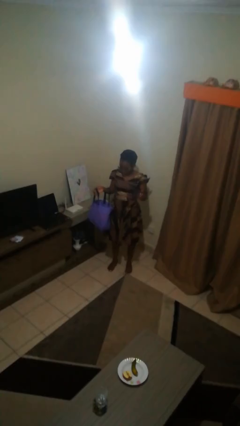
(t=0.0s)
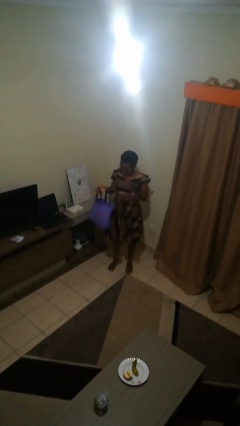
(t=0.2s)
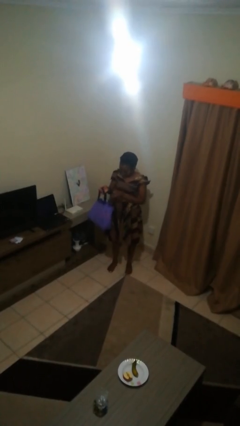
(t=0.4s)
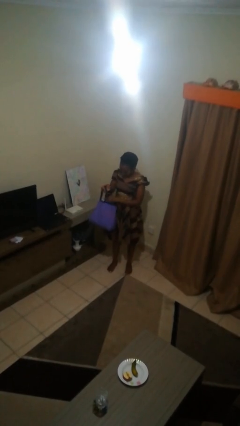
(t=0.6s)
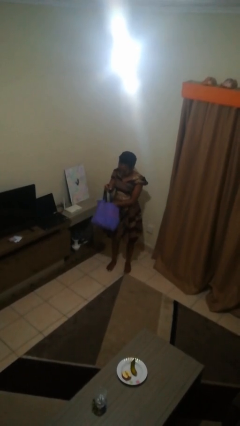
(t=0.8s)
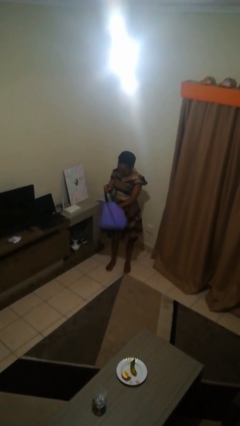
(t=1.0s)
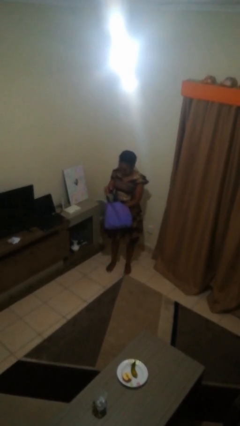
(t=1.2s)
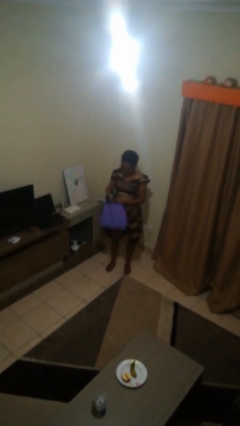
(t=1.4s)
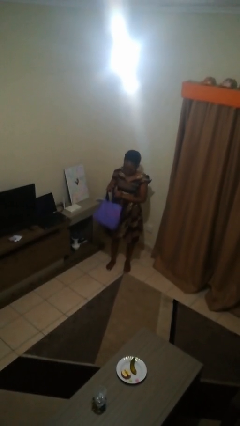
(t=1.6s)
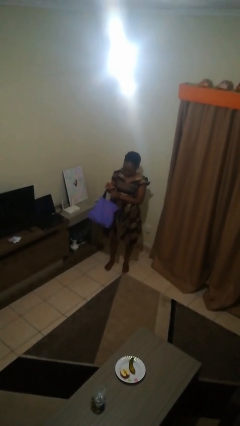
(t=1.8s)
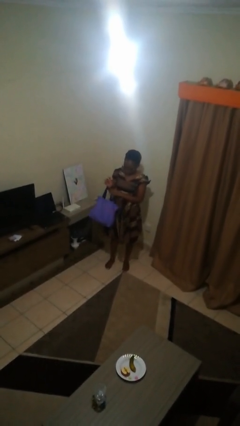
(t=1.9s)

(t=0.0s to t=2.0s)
person puts object into bag

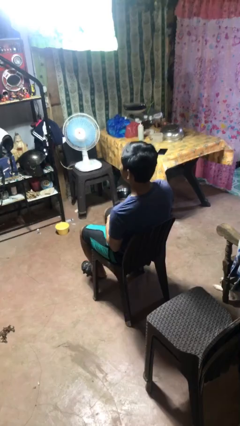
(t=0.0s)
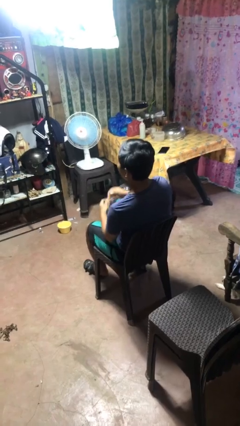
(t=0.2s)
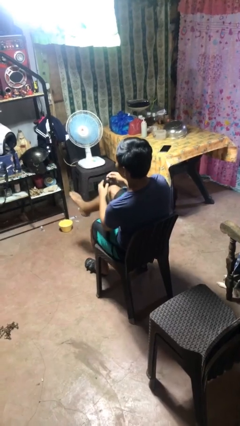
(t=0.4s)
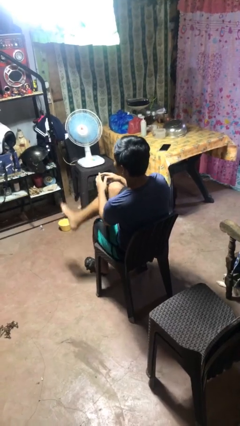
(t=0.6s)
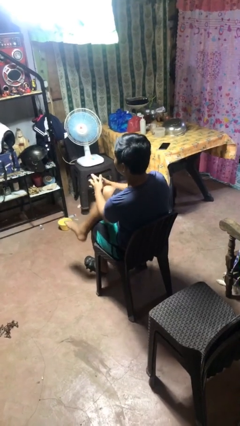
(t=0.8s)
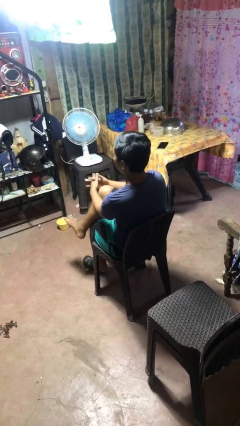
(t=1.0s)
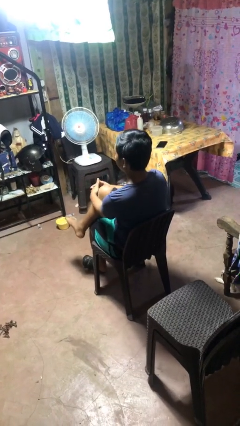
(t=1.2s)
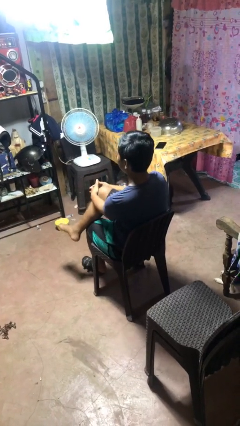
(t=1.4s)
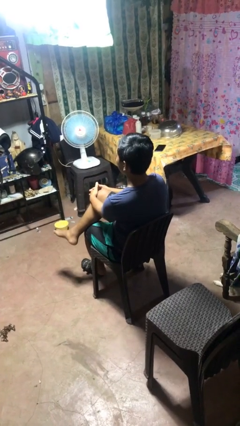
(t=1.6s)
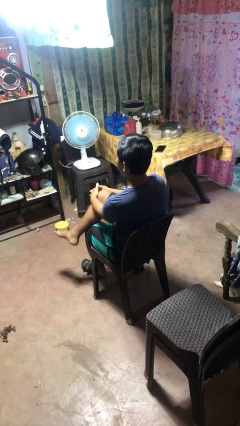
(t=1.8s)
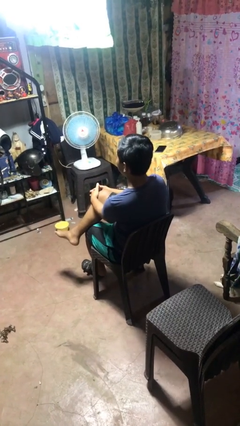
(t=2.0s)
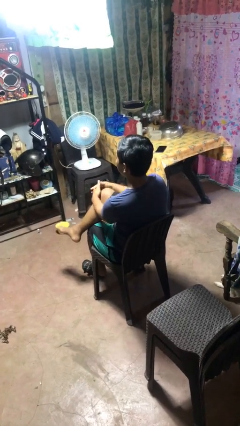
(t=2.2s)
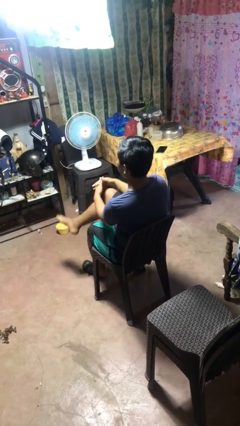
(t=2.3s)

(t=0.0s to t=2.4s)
person crosses legs

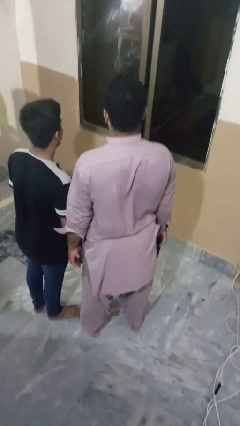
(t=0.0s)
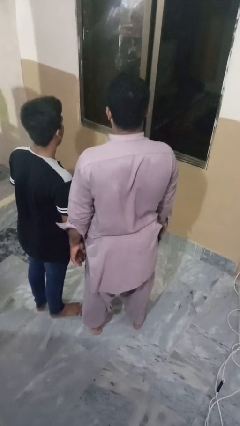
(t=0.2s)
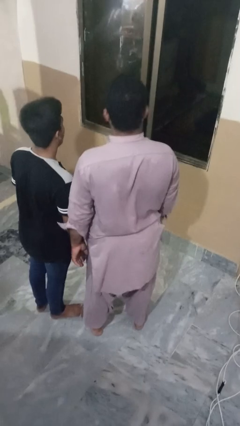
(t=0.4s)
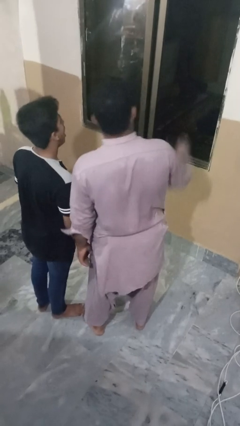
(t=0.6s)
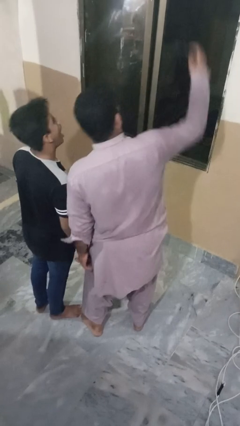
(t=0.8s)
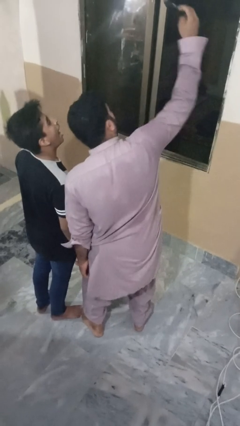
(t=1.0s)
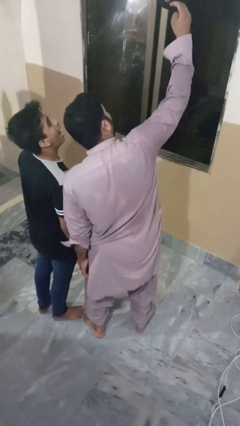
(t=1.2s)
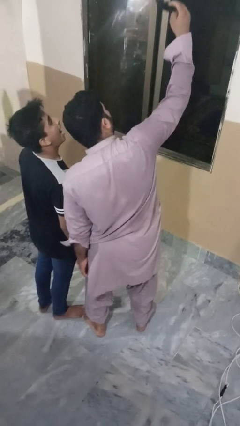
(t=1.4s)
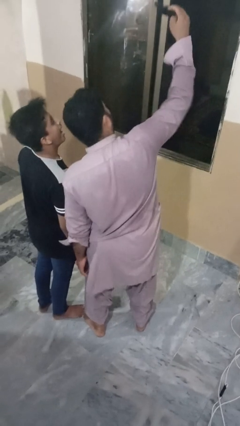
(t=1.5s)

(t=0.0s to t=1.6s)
person takes selfie with person

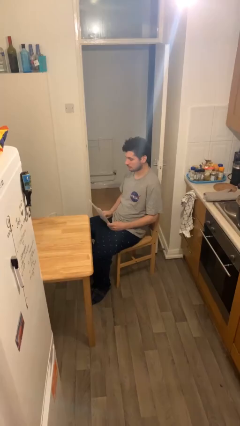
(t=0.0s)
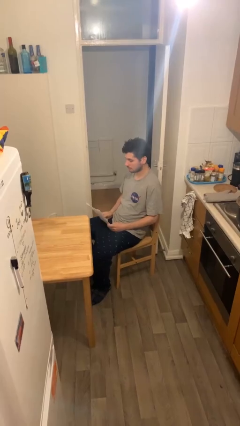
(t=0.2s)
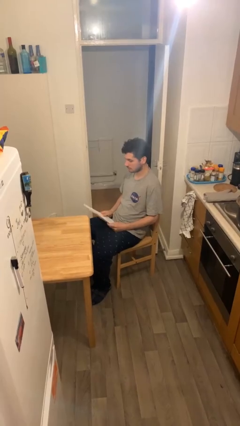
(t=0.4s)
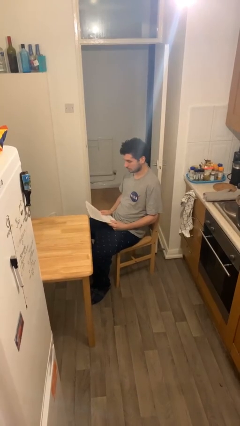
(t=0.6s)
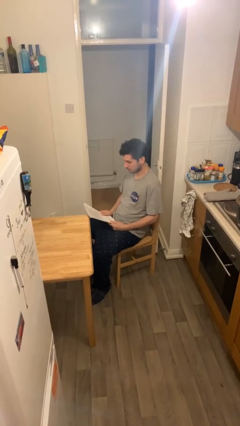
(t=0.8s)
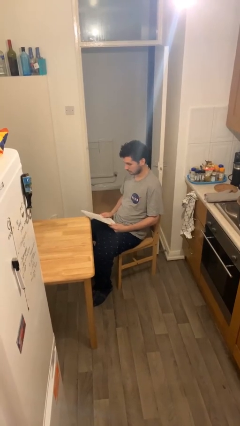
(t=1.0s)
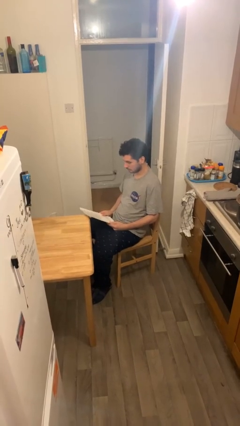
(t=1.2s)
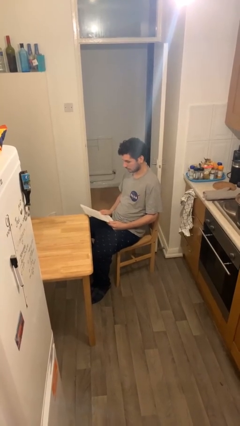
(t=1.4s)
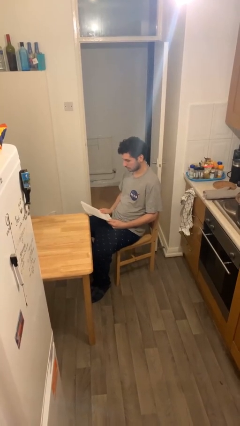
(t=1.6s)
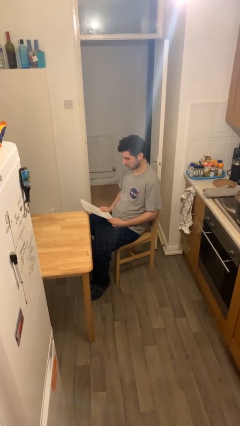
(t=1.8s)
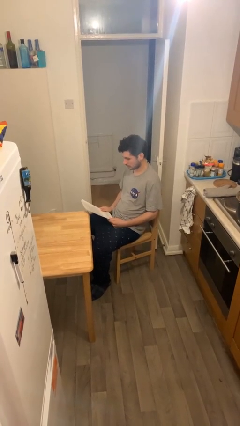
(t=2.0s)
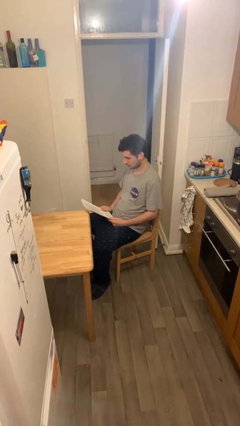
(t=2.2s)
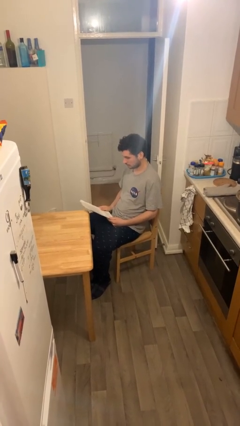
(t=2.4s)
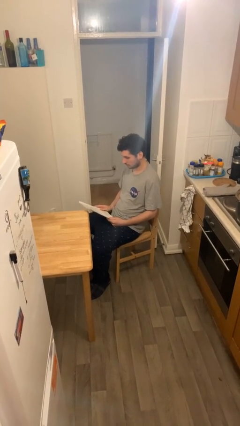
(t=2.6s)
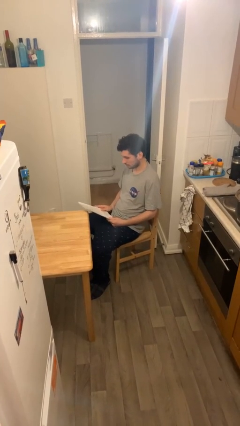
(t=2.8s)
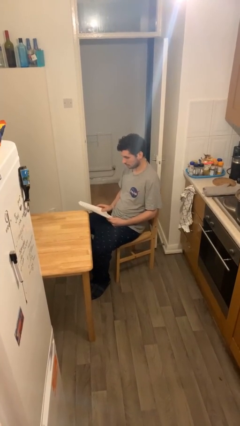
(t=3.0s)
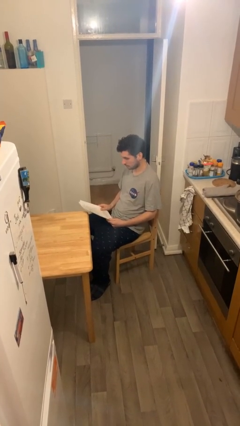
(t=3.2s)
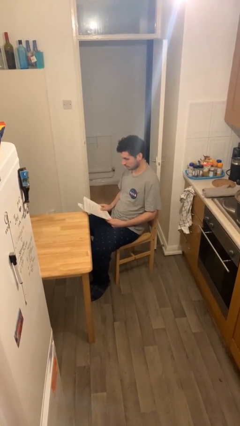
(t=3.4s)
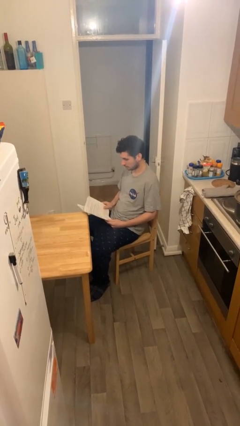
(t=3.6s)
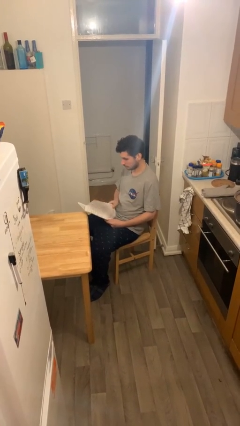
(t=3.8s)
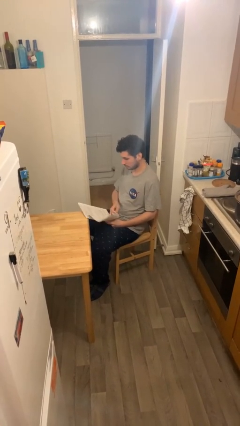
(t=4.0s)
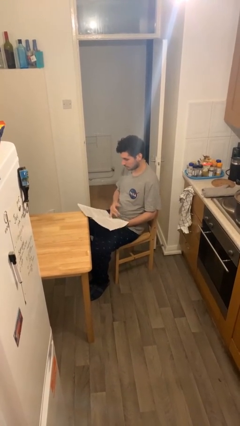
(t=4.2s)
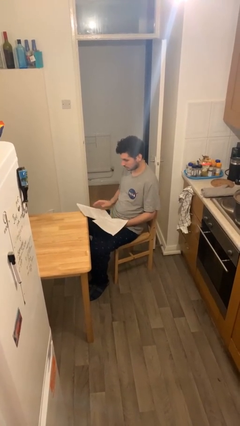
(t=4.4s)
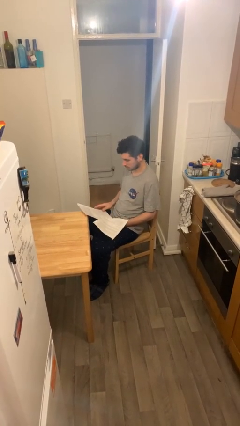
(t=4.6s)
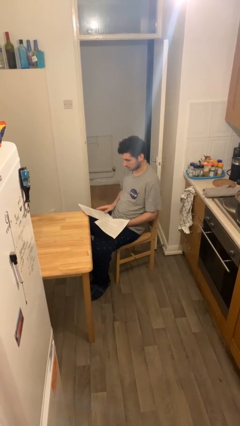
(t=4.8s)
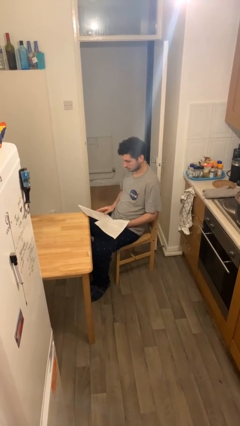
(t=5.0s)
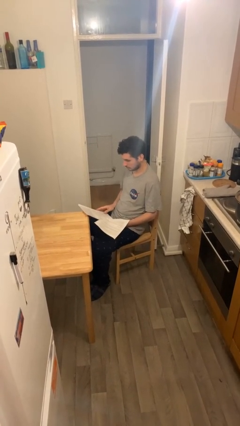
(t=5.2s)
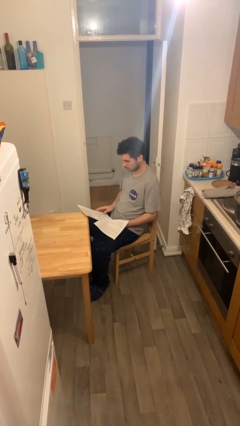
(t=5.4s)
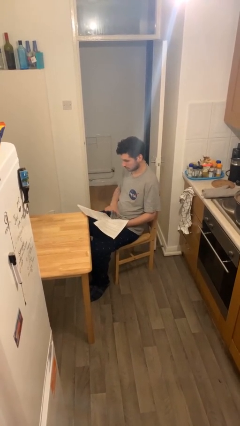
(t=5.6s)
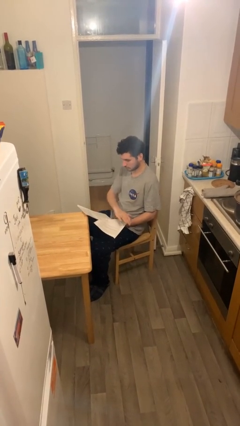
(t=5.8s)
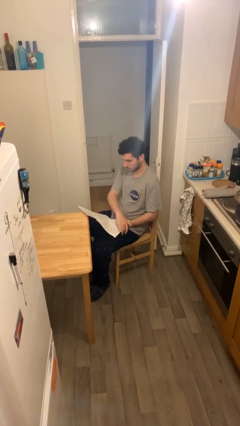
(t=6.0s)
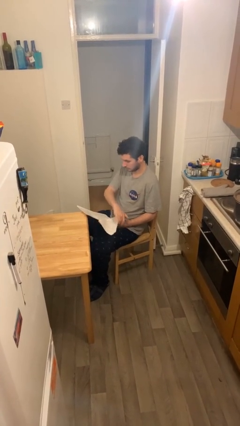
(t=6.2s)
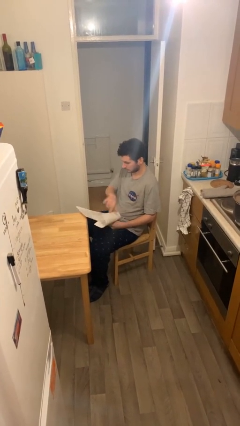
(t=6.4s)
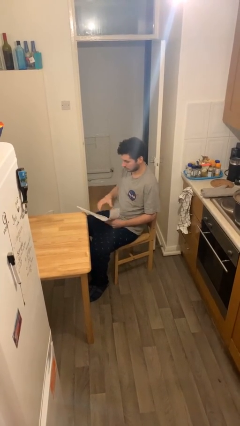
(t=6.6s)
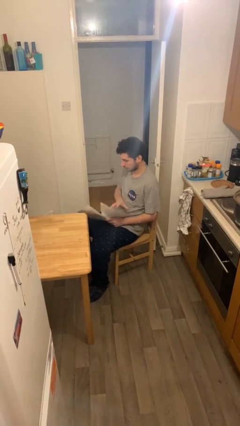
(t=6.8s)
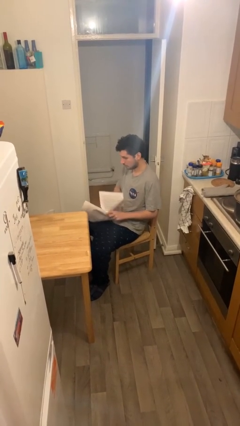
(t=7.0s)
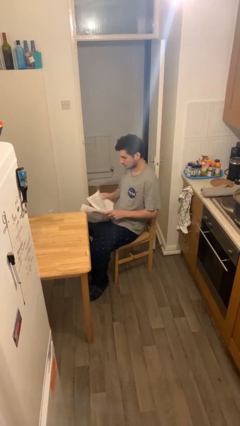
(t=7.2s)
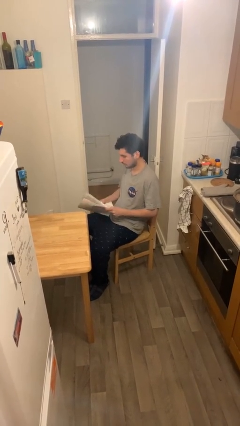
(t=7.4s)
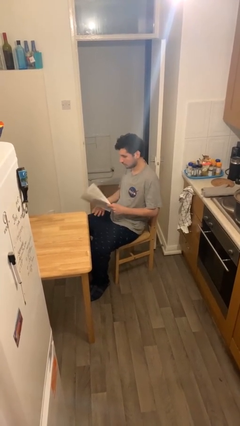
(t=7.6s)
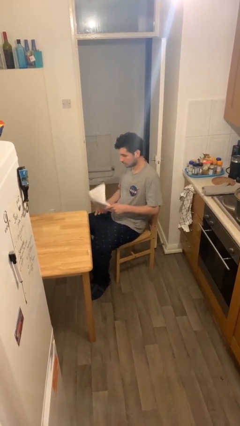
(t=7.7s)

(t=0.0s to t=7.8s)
person reads document

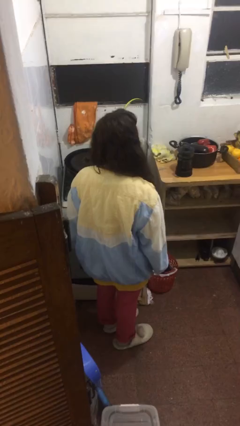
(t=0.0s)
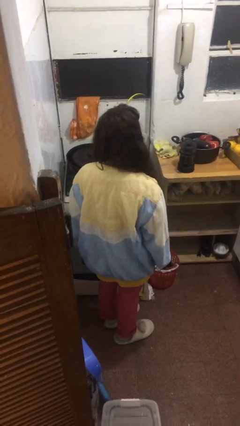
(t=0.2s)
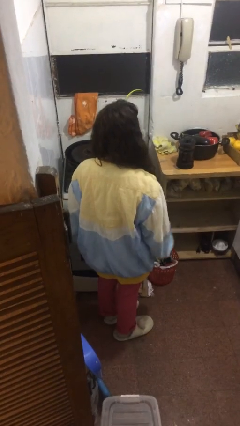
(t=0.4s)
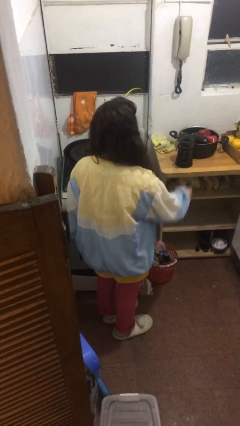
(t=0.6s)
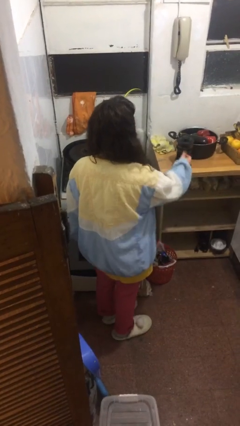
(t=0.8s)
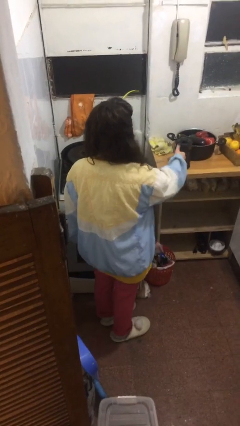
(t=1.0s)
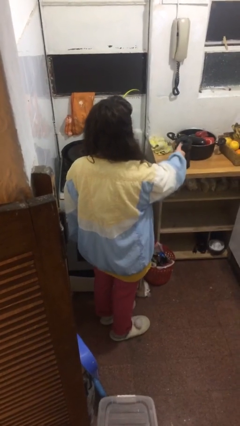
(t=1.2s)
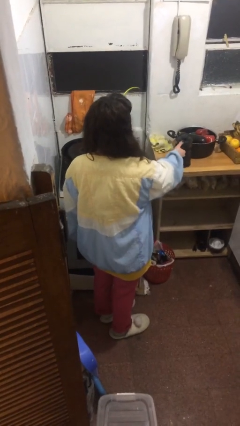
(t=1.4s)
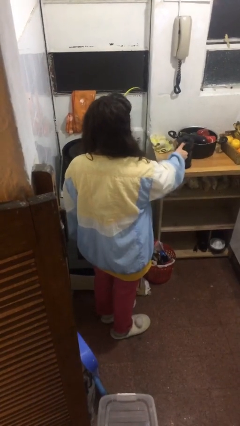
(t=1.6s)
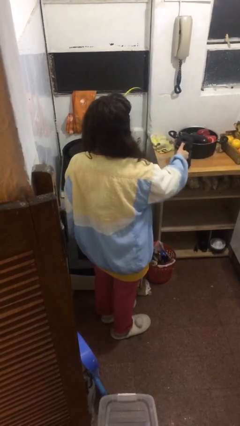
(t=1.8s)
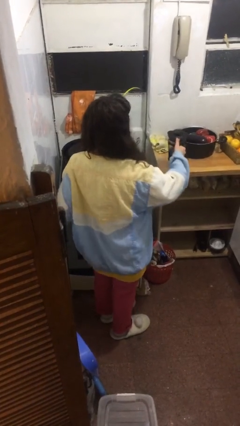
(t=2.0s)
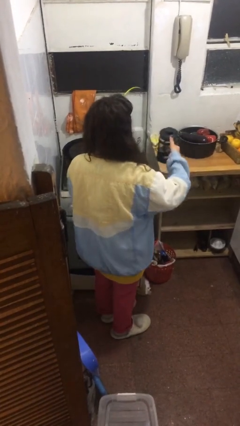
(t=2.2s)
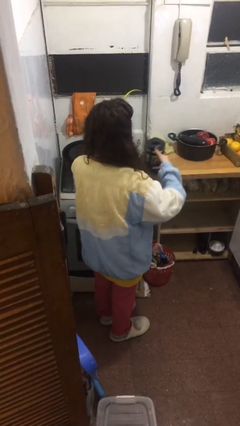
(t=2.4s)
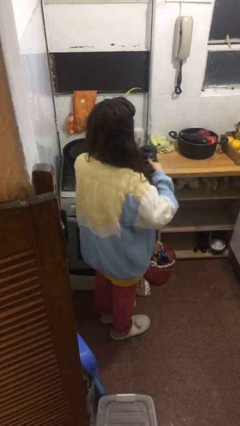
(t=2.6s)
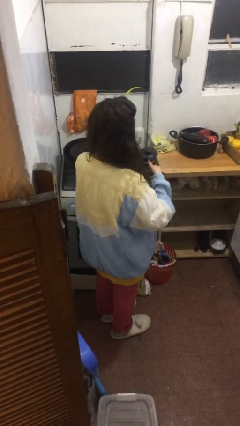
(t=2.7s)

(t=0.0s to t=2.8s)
person picks up object from countertop

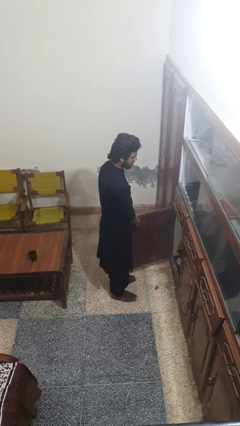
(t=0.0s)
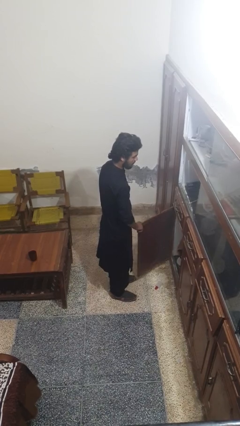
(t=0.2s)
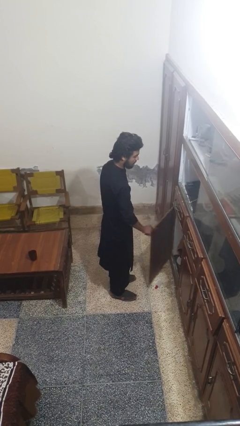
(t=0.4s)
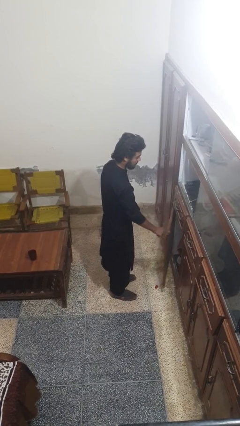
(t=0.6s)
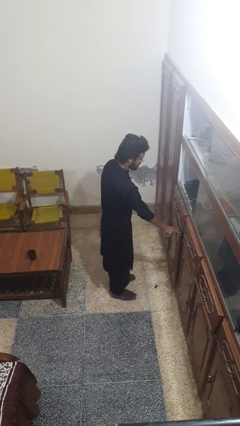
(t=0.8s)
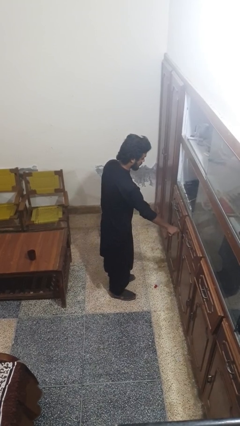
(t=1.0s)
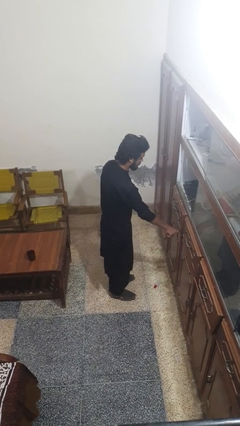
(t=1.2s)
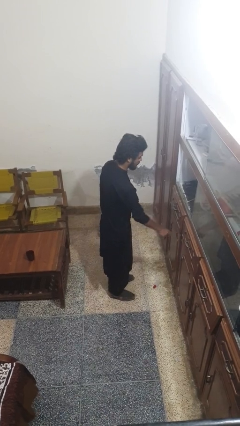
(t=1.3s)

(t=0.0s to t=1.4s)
person closes cabinet
